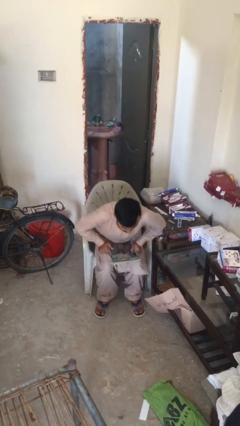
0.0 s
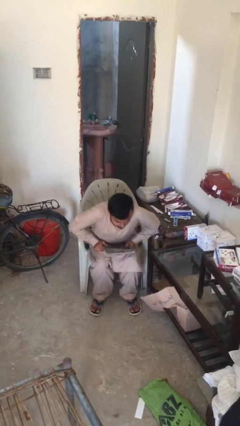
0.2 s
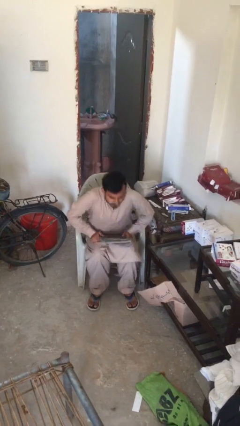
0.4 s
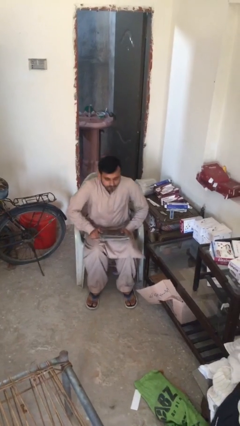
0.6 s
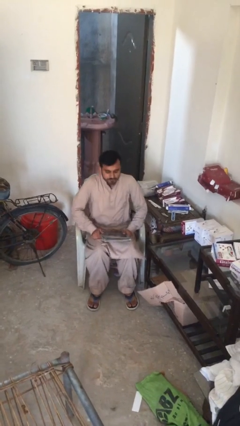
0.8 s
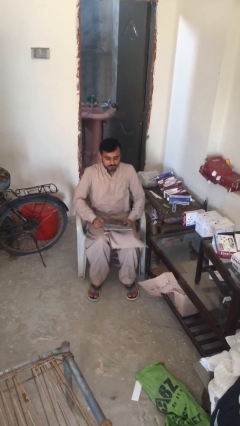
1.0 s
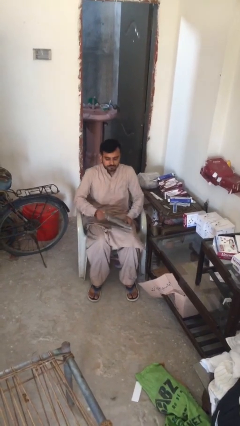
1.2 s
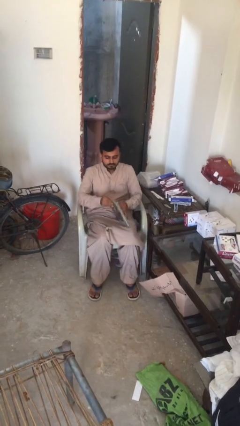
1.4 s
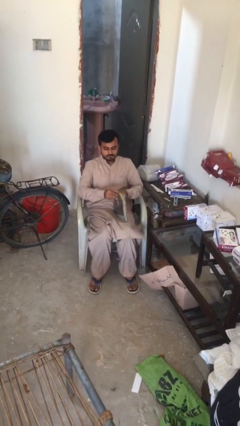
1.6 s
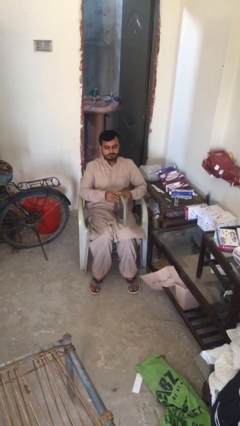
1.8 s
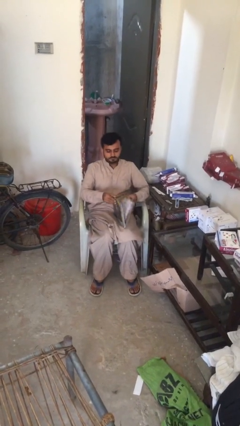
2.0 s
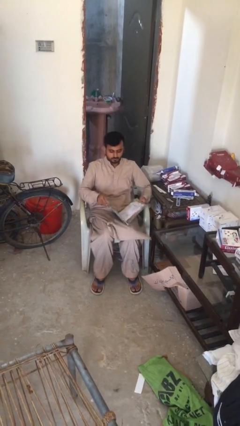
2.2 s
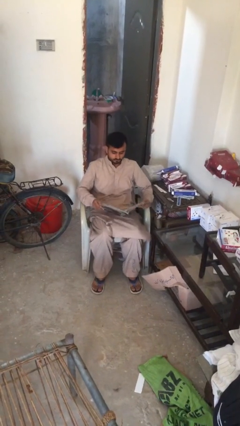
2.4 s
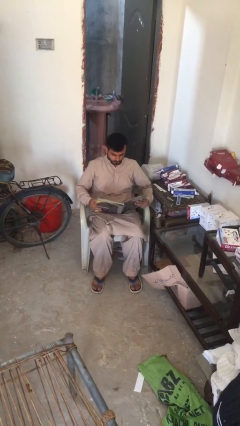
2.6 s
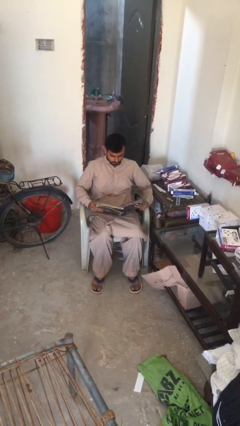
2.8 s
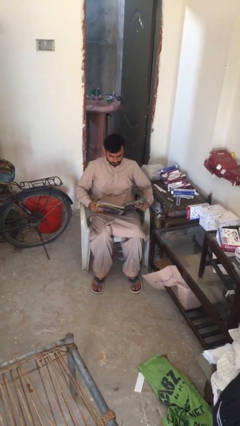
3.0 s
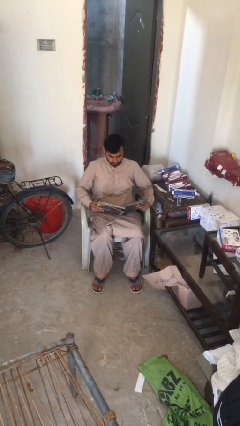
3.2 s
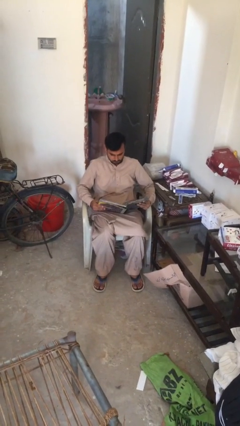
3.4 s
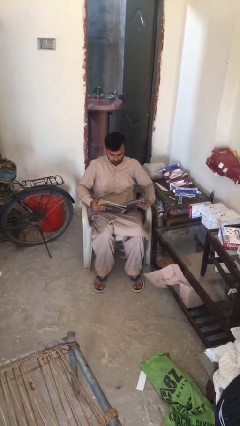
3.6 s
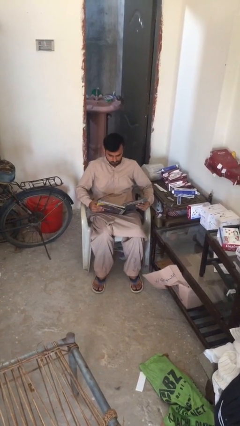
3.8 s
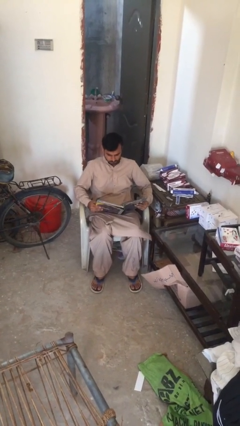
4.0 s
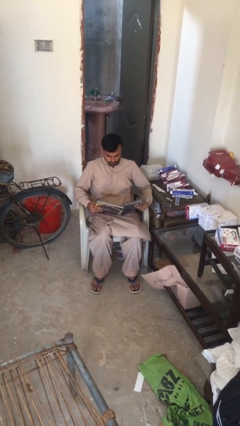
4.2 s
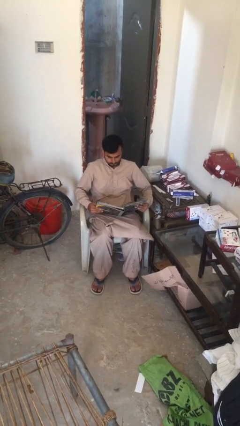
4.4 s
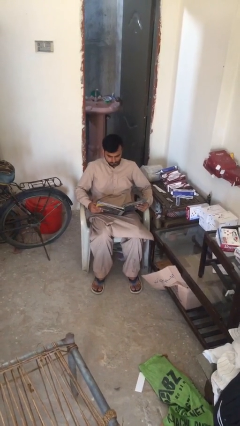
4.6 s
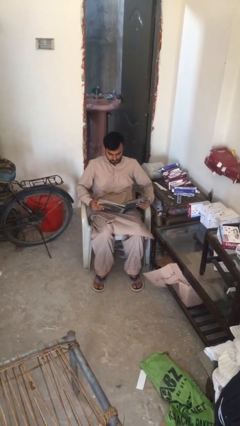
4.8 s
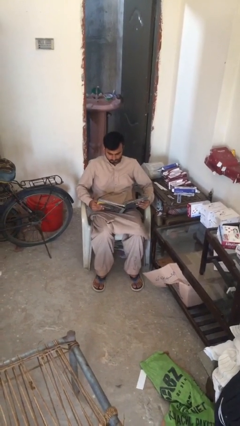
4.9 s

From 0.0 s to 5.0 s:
person reads document

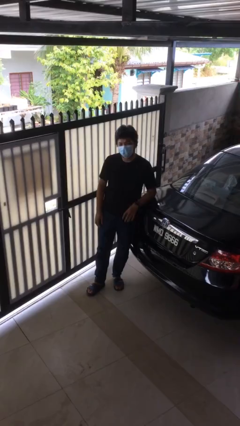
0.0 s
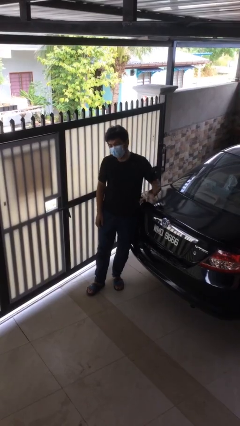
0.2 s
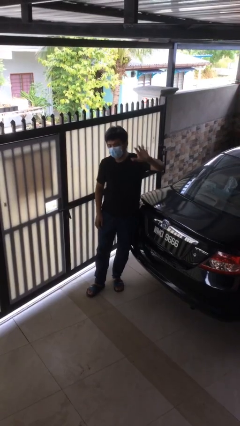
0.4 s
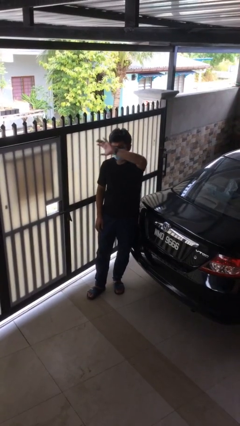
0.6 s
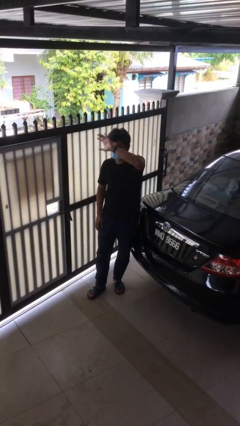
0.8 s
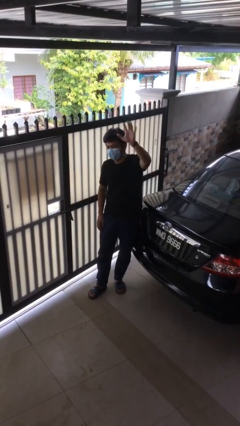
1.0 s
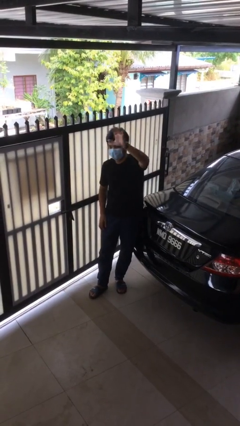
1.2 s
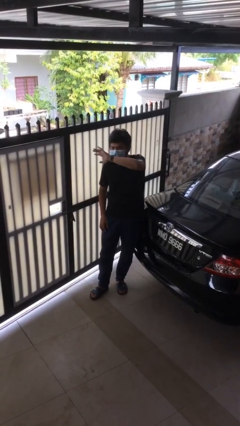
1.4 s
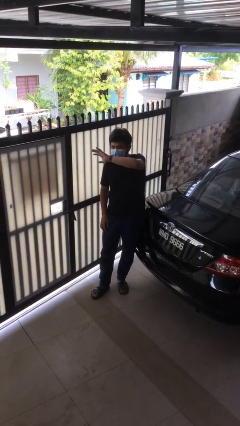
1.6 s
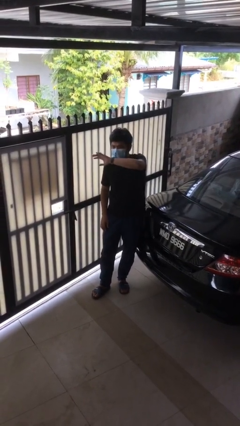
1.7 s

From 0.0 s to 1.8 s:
person waves at person

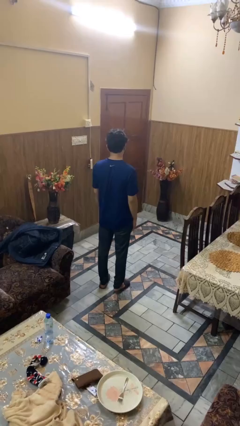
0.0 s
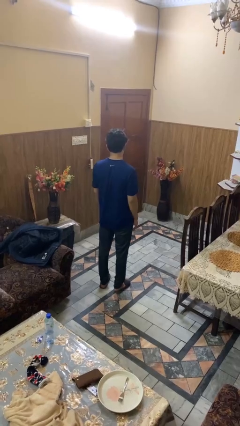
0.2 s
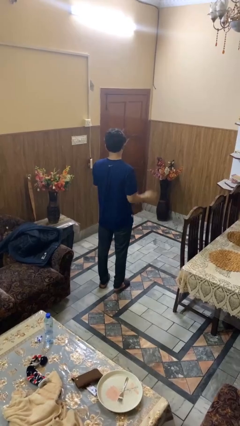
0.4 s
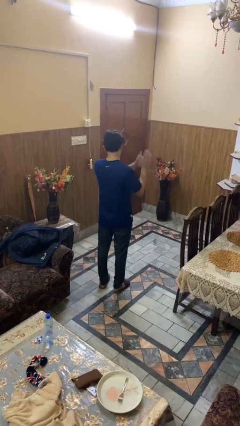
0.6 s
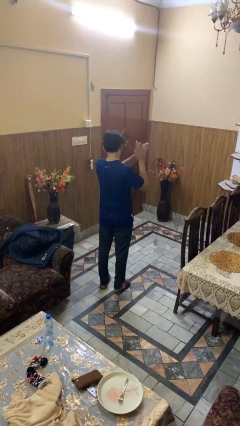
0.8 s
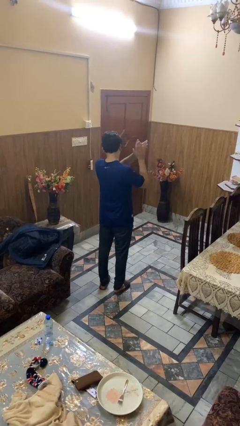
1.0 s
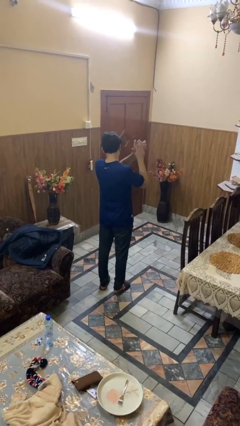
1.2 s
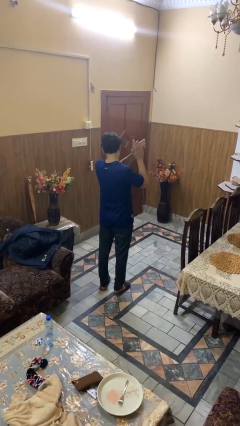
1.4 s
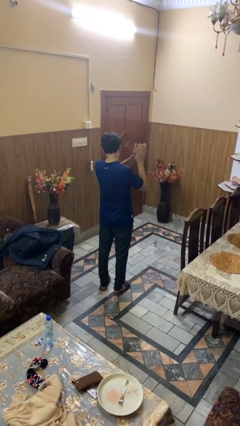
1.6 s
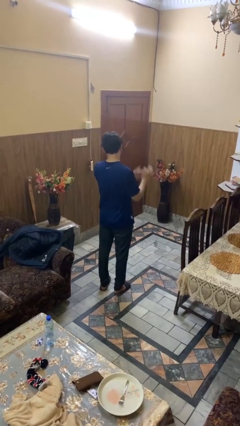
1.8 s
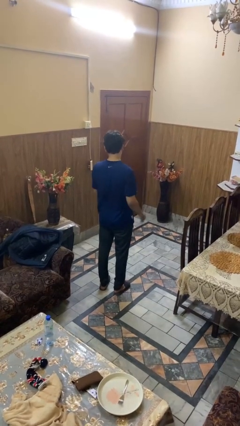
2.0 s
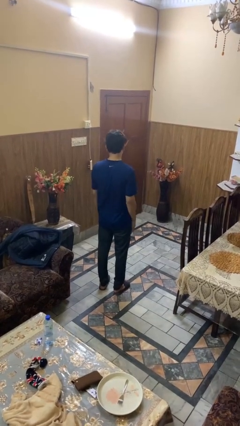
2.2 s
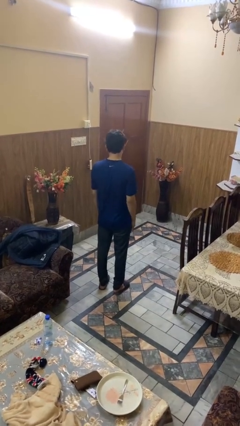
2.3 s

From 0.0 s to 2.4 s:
person claps hands

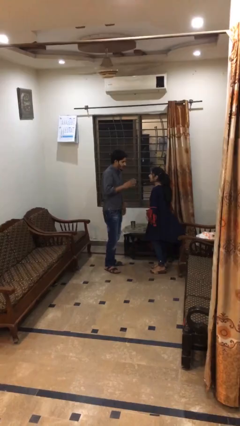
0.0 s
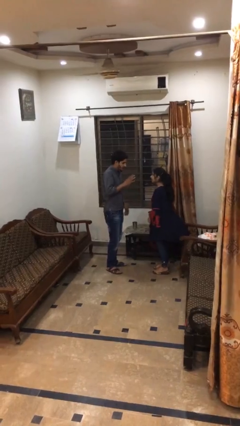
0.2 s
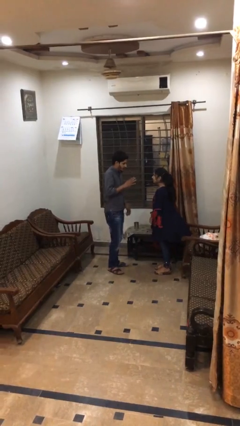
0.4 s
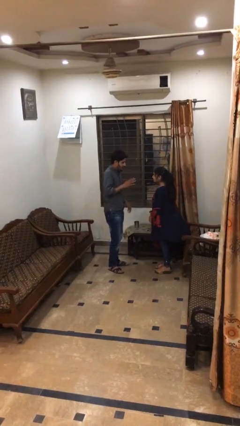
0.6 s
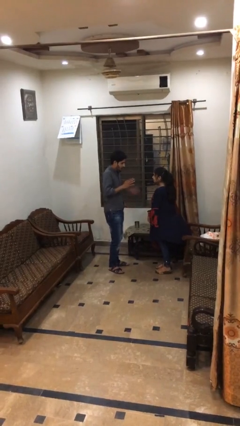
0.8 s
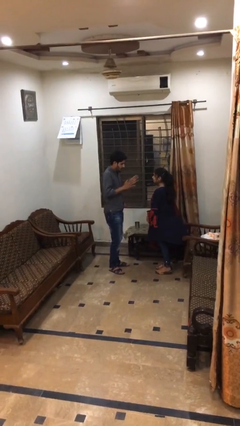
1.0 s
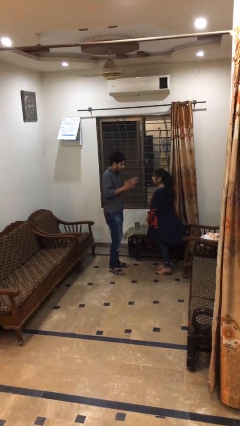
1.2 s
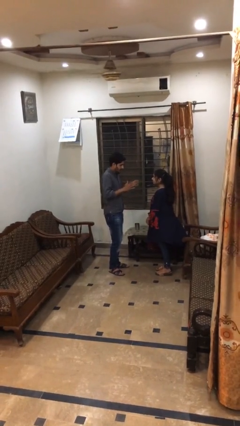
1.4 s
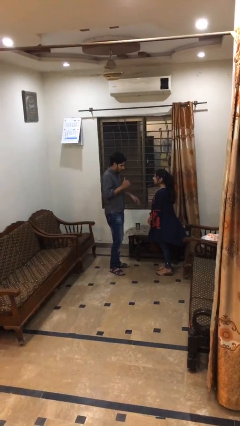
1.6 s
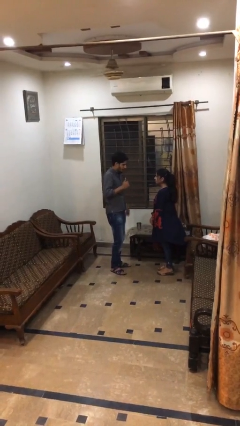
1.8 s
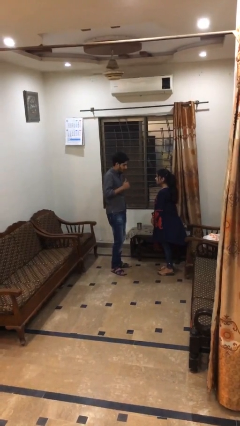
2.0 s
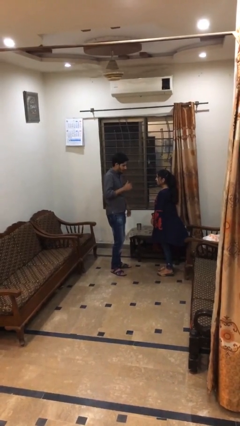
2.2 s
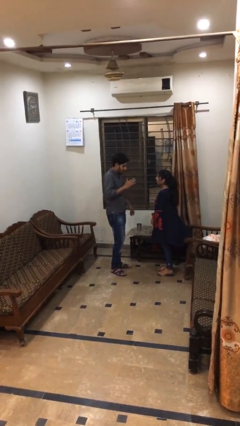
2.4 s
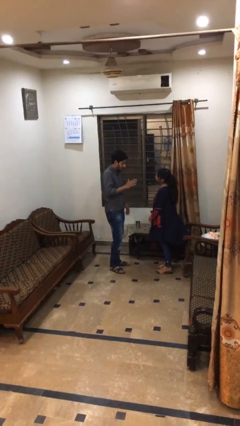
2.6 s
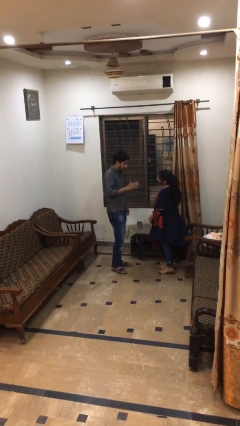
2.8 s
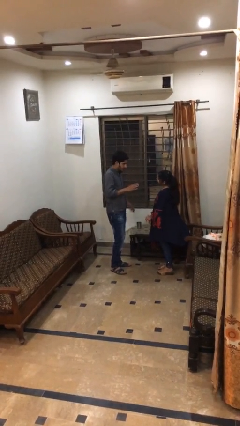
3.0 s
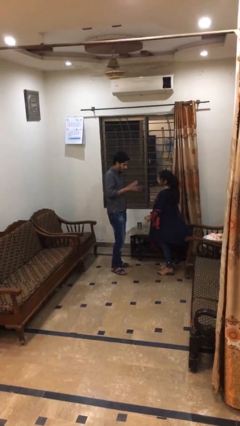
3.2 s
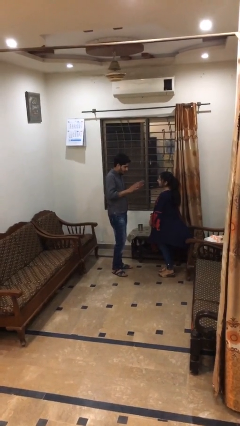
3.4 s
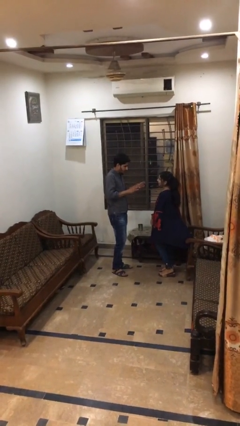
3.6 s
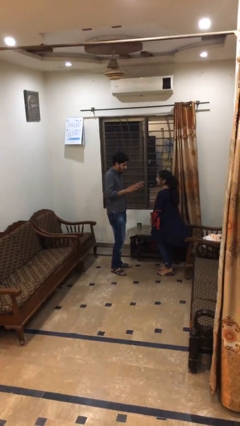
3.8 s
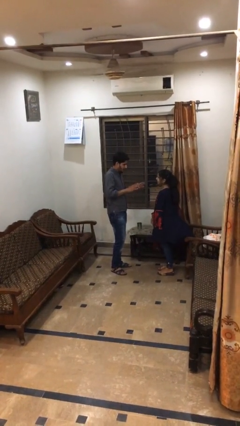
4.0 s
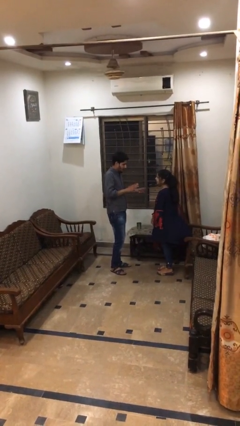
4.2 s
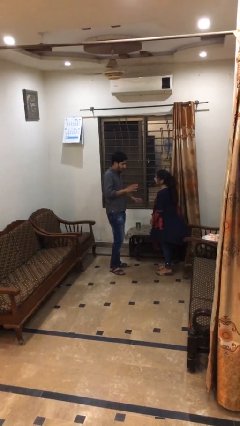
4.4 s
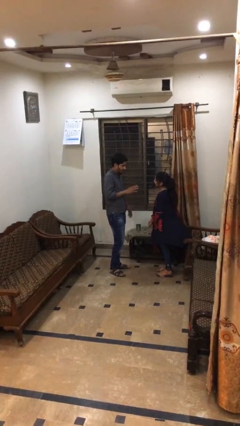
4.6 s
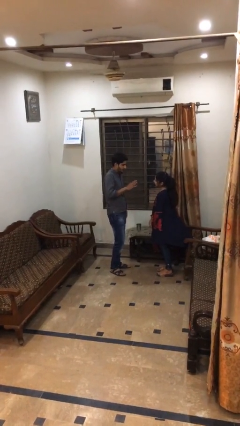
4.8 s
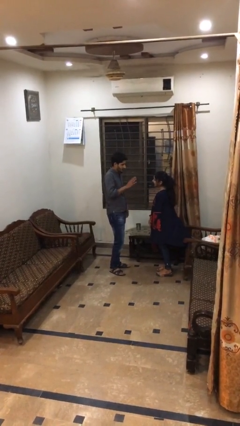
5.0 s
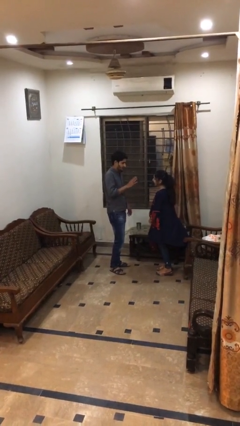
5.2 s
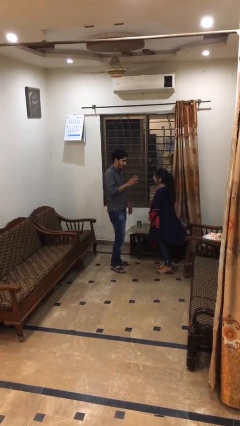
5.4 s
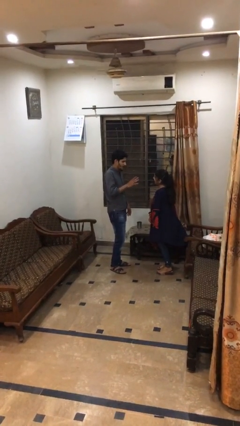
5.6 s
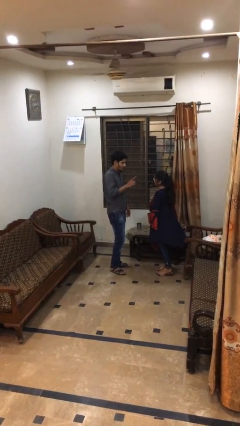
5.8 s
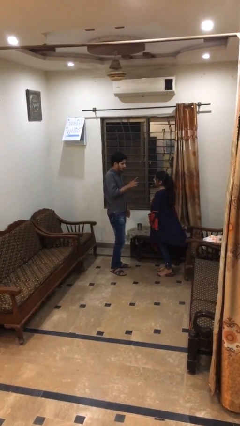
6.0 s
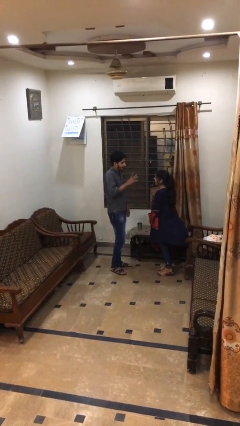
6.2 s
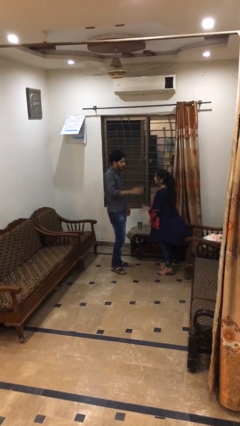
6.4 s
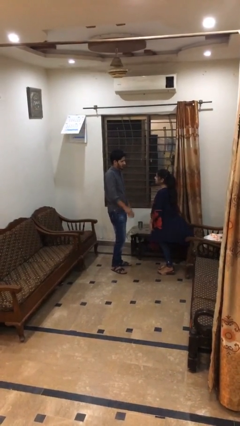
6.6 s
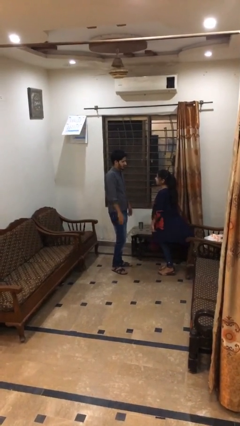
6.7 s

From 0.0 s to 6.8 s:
person talks to person

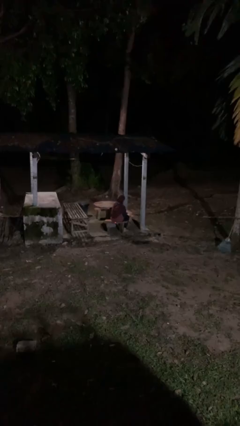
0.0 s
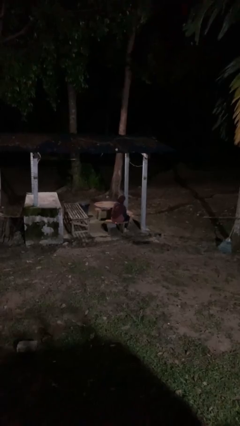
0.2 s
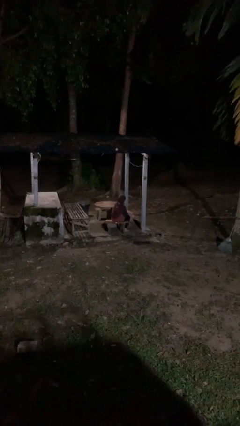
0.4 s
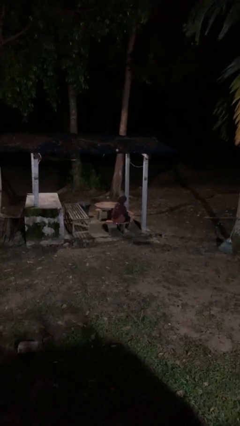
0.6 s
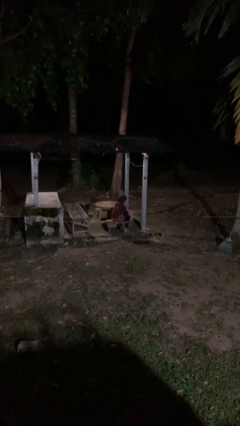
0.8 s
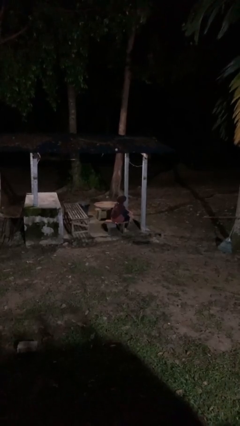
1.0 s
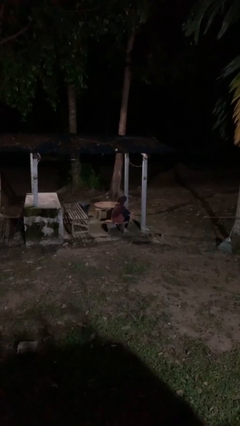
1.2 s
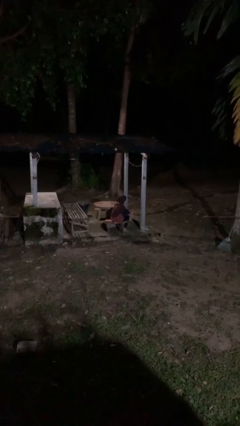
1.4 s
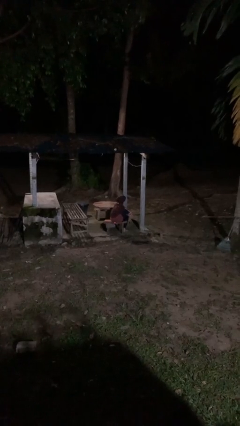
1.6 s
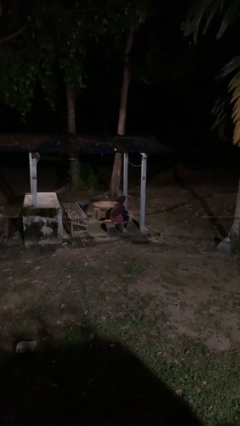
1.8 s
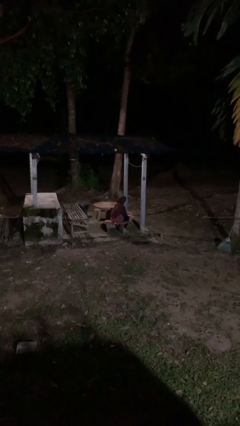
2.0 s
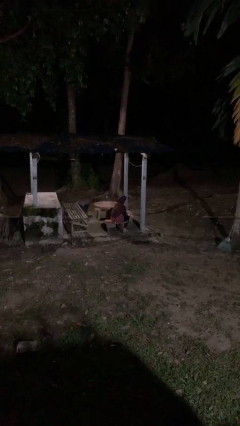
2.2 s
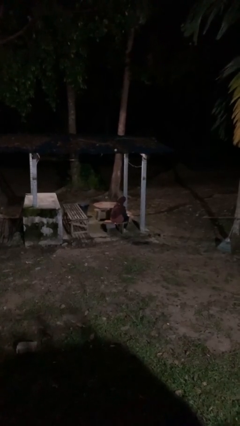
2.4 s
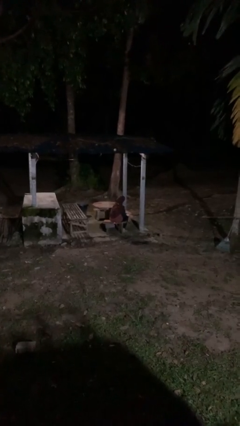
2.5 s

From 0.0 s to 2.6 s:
person rubs foot
